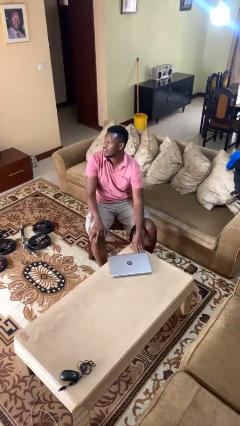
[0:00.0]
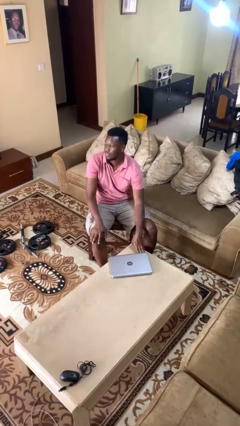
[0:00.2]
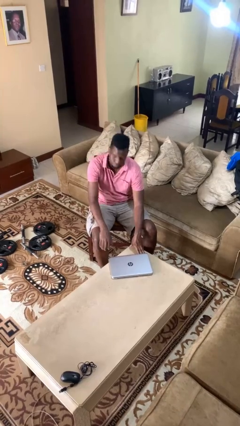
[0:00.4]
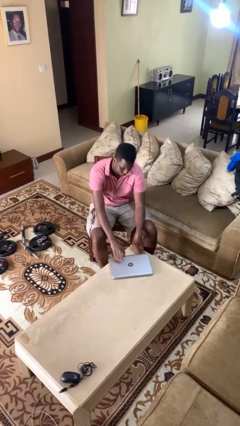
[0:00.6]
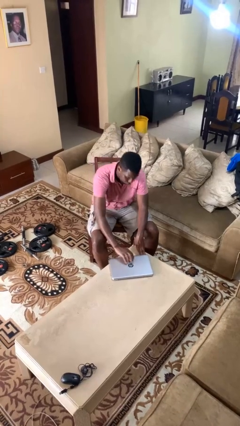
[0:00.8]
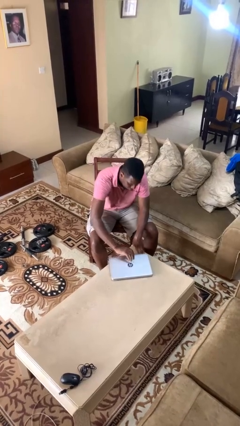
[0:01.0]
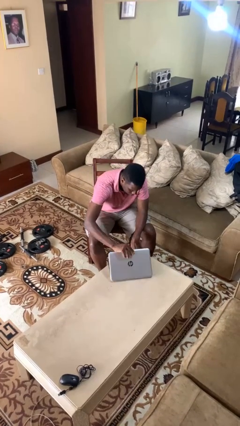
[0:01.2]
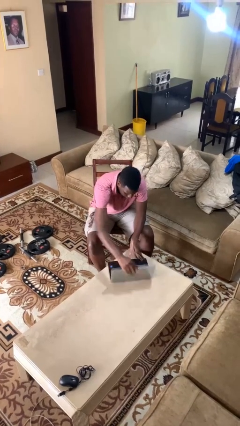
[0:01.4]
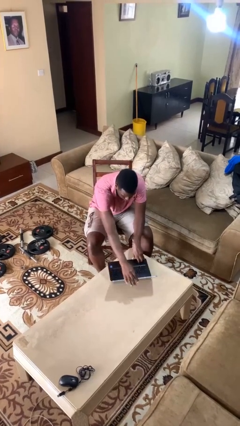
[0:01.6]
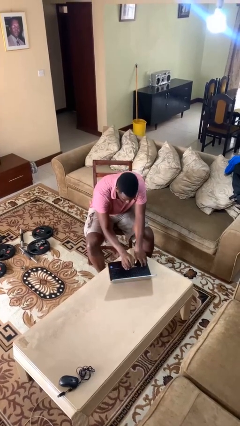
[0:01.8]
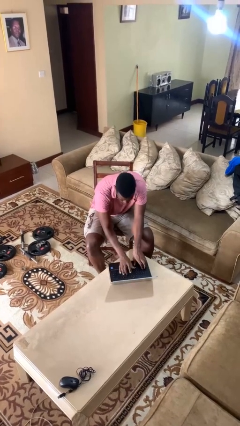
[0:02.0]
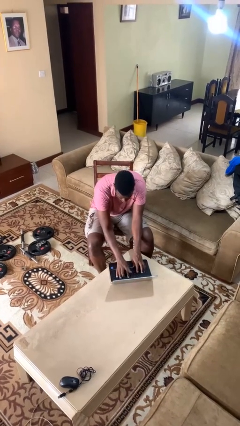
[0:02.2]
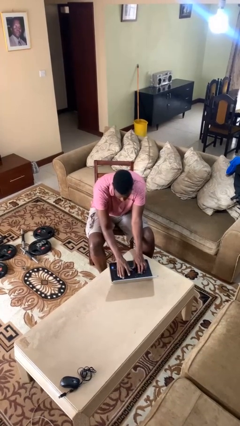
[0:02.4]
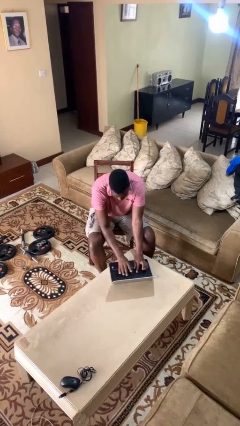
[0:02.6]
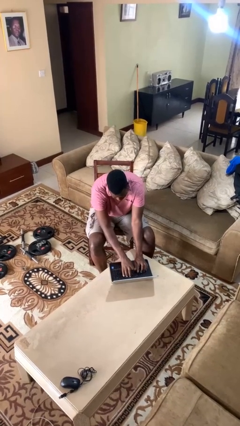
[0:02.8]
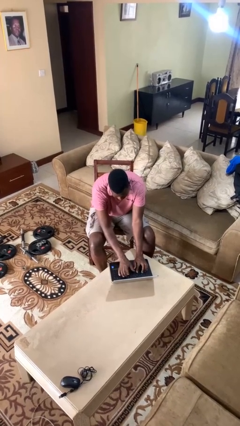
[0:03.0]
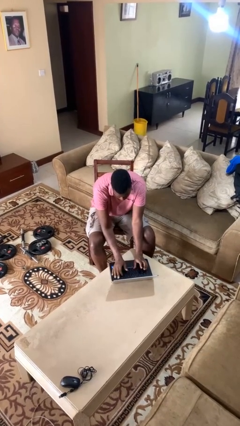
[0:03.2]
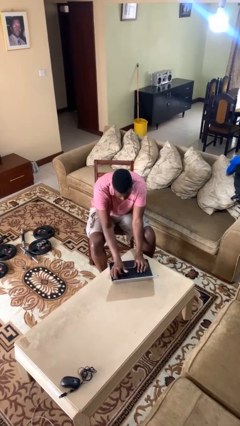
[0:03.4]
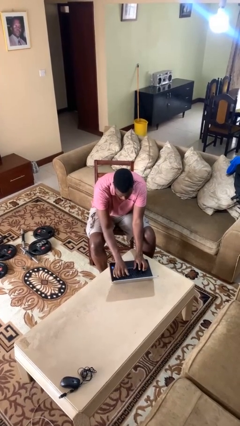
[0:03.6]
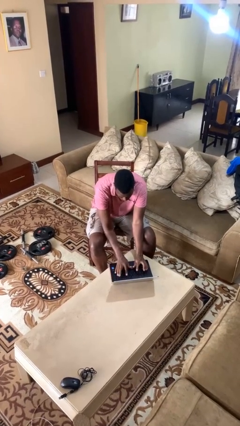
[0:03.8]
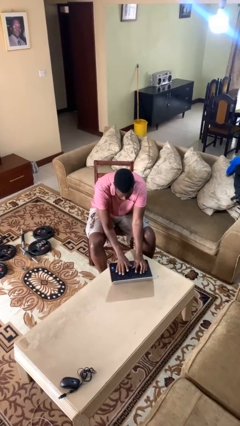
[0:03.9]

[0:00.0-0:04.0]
person interacts with laptop

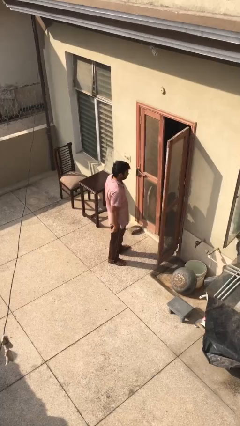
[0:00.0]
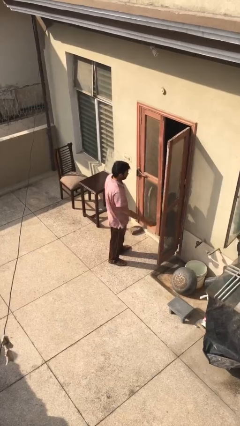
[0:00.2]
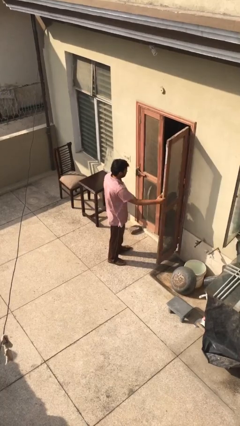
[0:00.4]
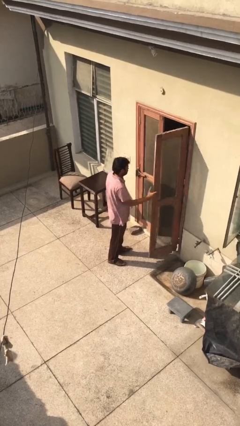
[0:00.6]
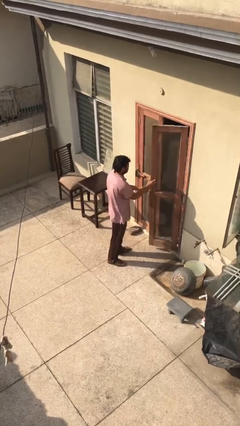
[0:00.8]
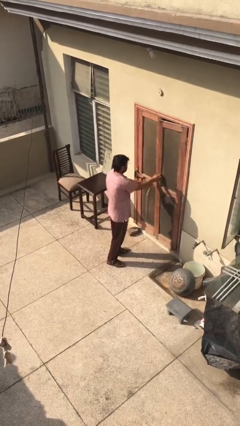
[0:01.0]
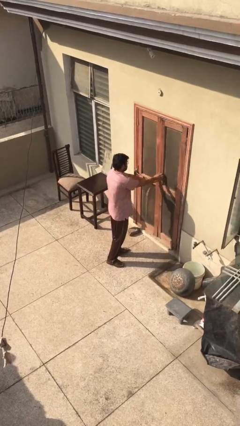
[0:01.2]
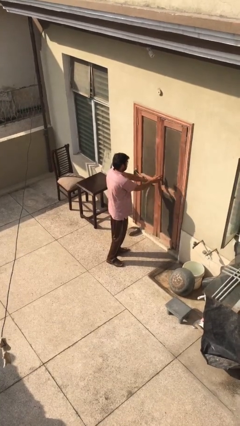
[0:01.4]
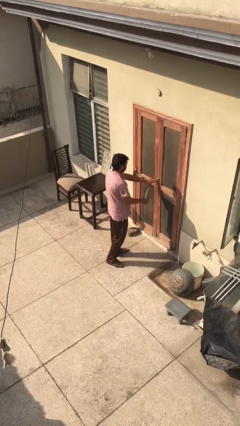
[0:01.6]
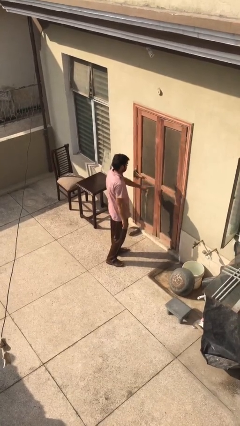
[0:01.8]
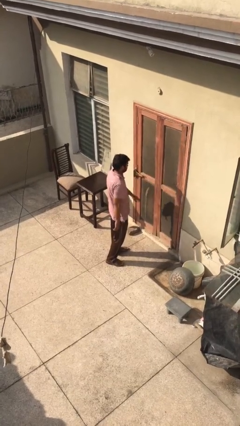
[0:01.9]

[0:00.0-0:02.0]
person closes facility door

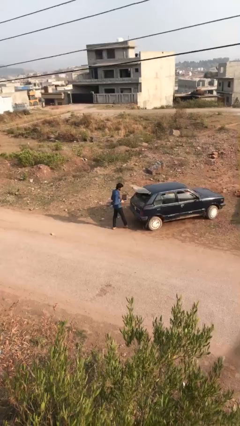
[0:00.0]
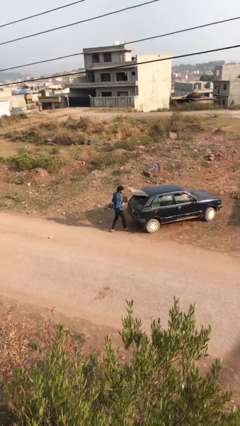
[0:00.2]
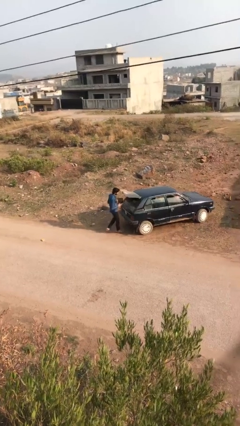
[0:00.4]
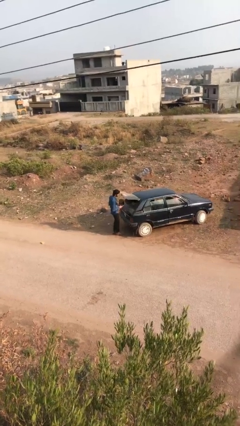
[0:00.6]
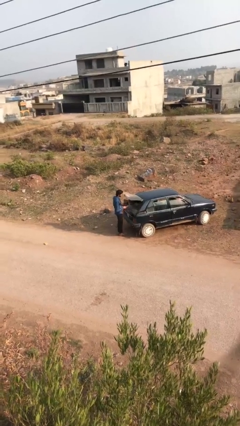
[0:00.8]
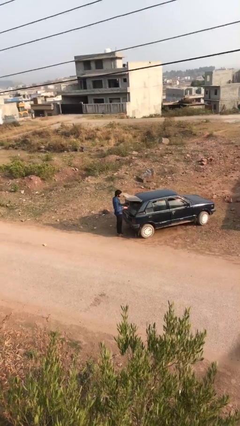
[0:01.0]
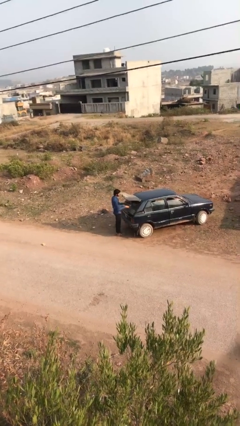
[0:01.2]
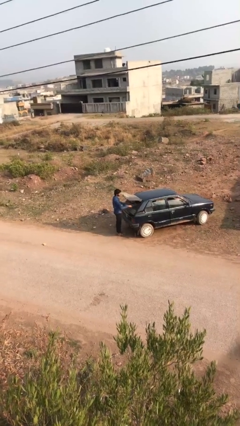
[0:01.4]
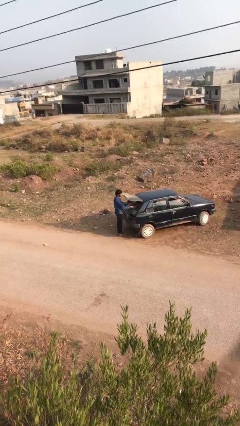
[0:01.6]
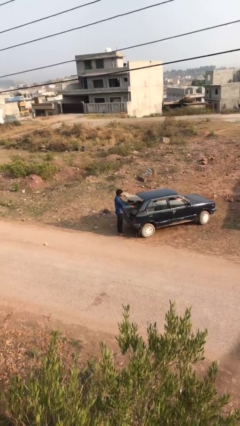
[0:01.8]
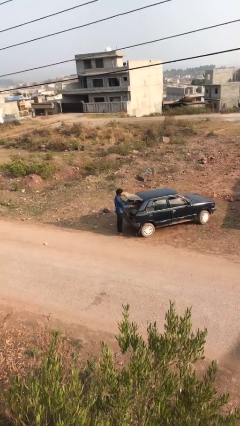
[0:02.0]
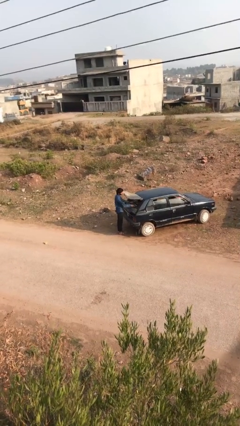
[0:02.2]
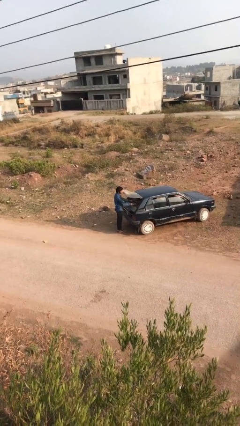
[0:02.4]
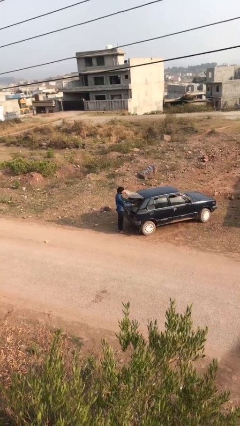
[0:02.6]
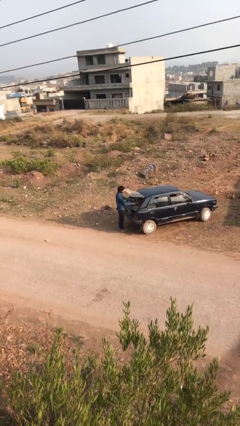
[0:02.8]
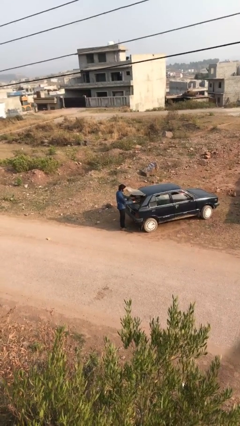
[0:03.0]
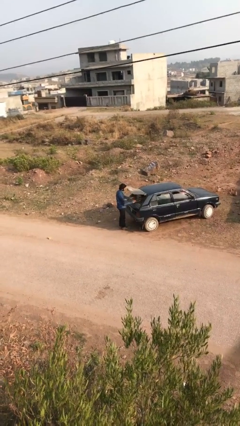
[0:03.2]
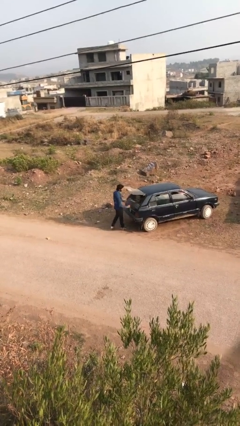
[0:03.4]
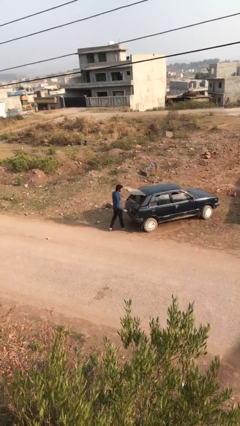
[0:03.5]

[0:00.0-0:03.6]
person loads car

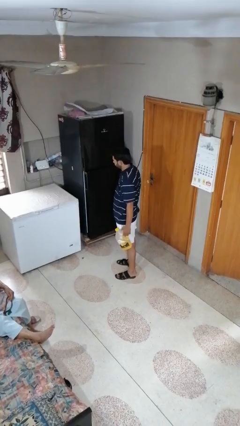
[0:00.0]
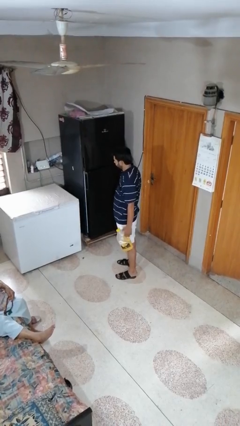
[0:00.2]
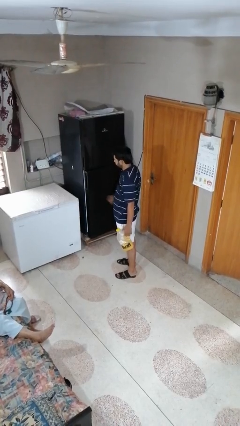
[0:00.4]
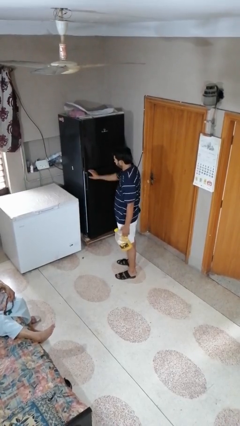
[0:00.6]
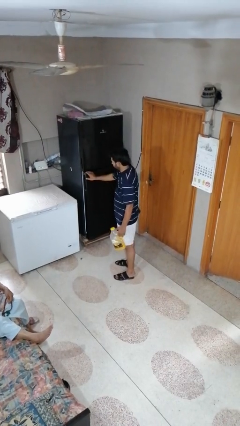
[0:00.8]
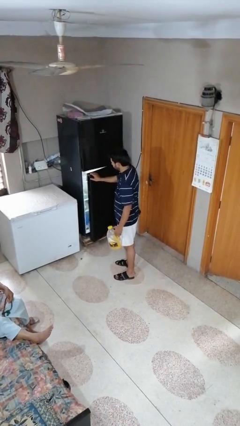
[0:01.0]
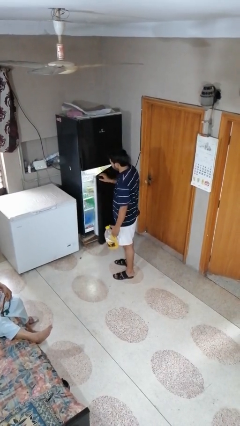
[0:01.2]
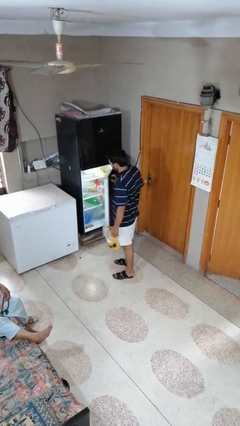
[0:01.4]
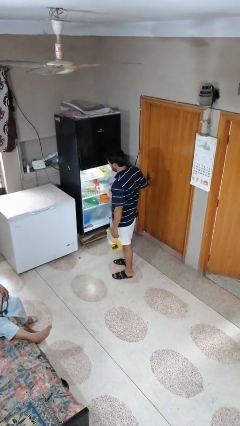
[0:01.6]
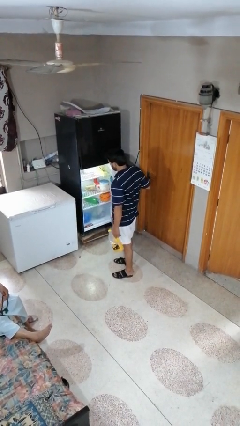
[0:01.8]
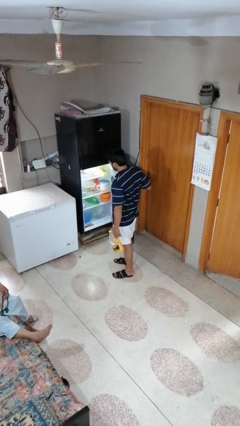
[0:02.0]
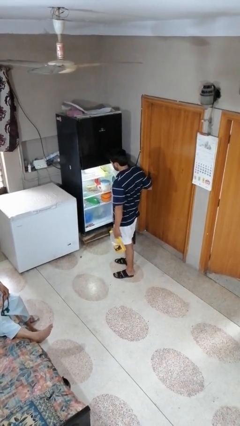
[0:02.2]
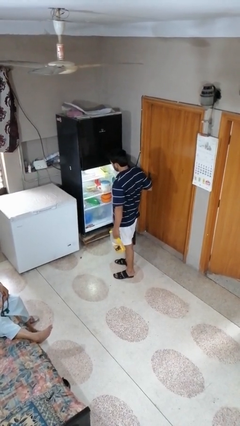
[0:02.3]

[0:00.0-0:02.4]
person opens refrigerator

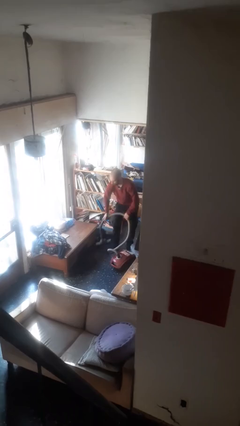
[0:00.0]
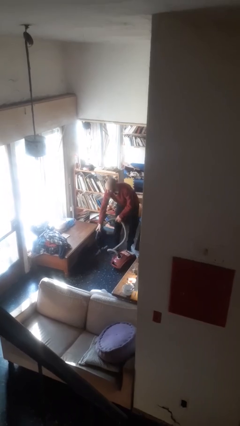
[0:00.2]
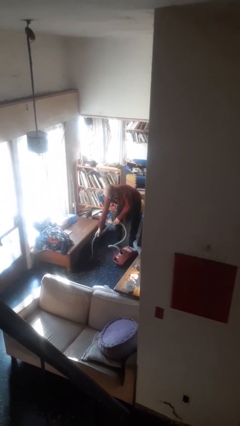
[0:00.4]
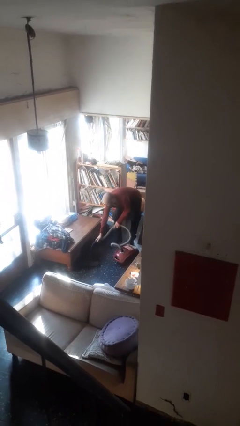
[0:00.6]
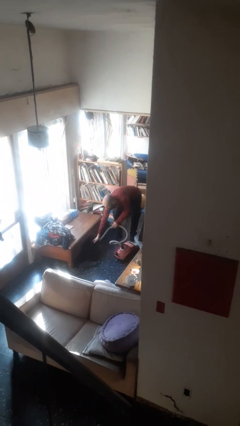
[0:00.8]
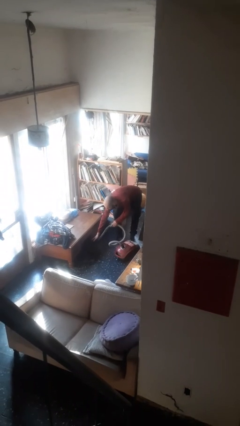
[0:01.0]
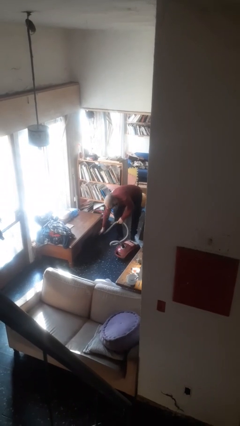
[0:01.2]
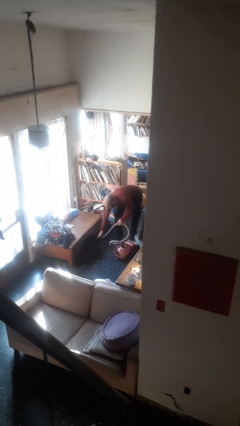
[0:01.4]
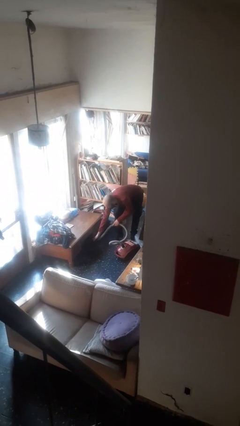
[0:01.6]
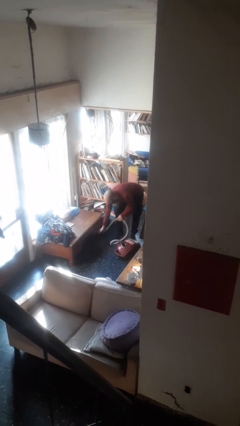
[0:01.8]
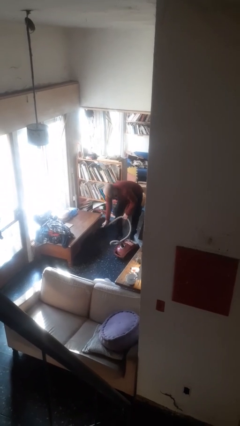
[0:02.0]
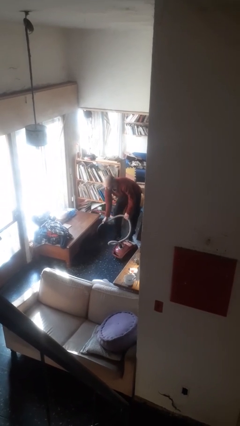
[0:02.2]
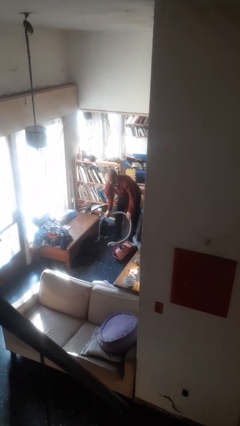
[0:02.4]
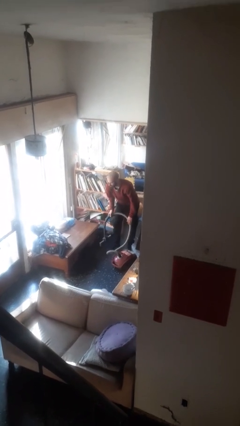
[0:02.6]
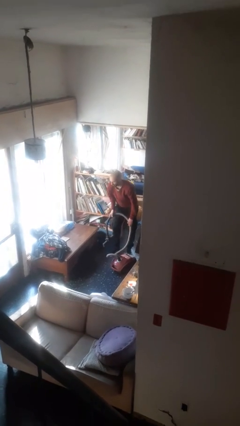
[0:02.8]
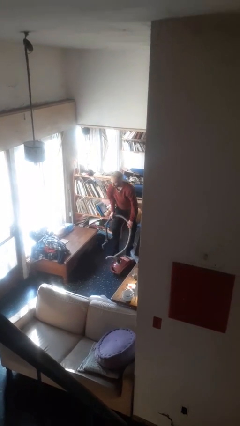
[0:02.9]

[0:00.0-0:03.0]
person vacuums carpet

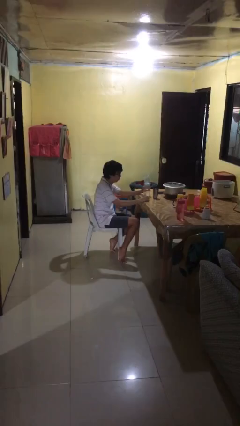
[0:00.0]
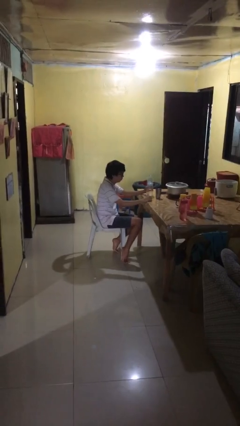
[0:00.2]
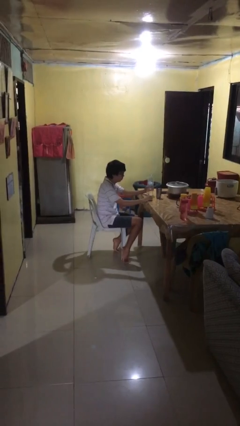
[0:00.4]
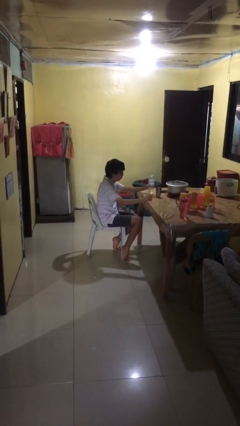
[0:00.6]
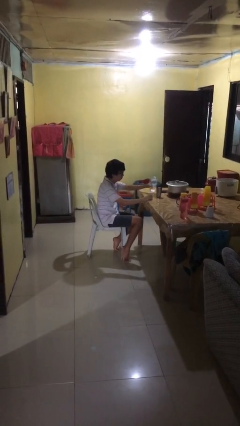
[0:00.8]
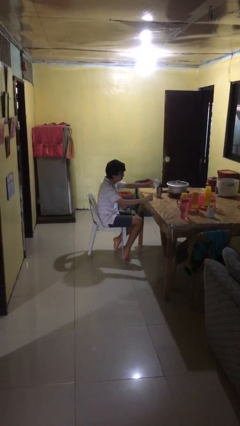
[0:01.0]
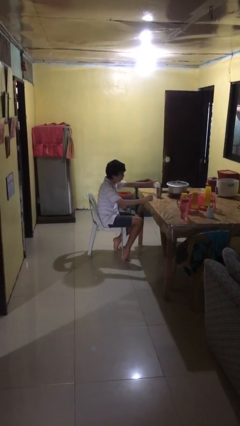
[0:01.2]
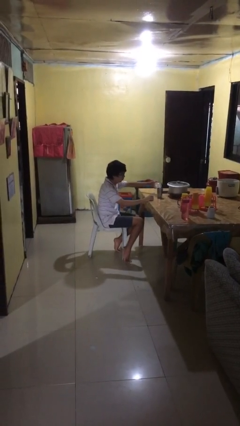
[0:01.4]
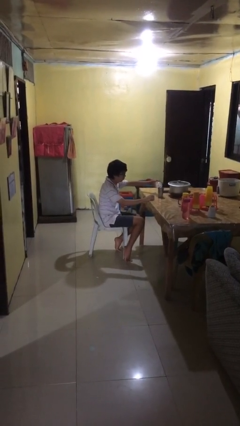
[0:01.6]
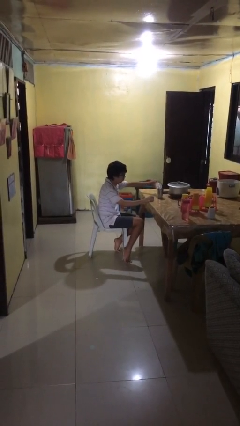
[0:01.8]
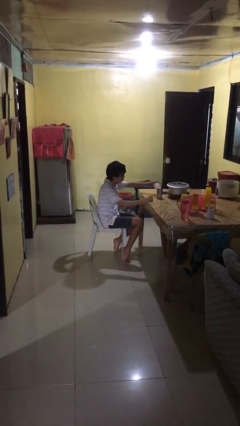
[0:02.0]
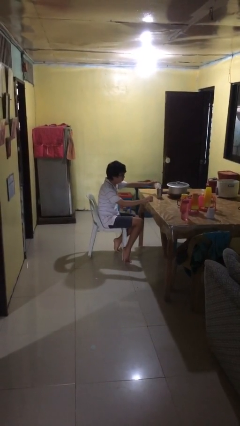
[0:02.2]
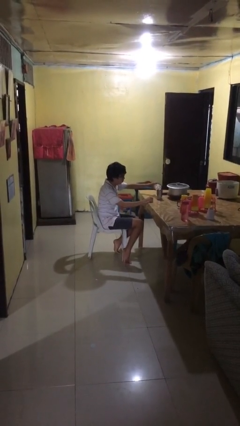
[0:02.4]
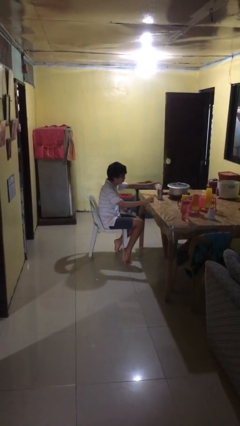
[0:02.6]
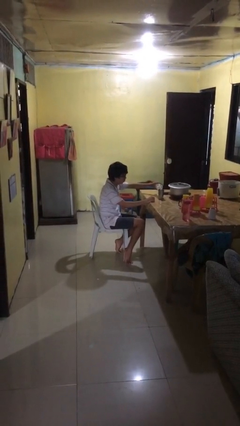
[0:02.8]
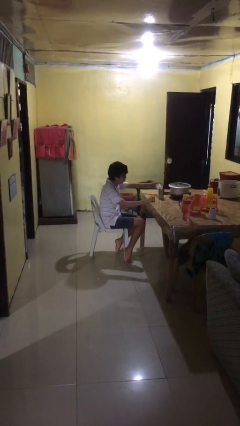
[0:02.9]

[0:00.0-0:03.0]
person pours liquid into cup
